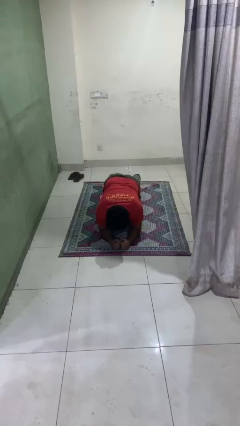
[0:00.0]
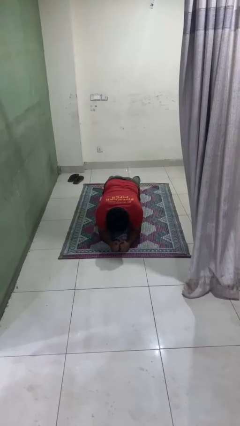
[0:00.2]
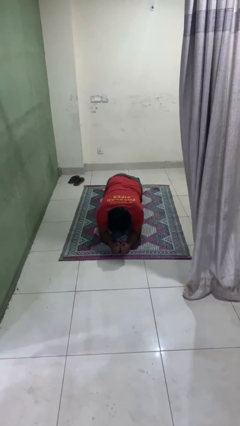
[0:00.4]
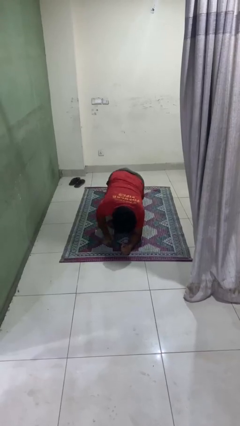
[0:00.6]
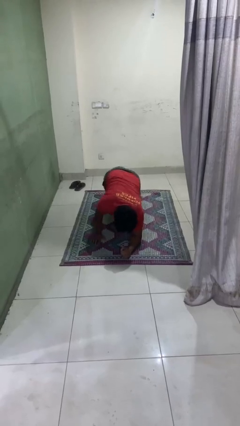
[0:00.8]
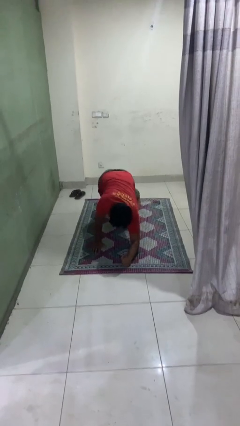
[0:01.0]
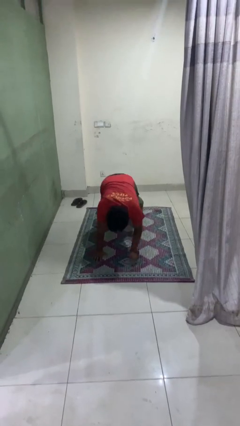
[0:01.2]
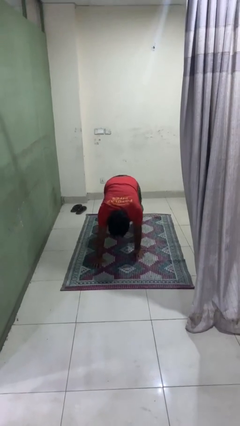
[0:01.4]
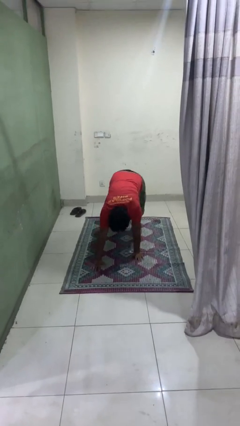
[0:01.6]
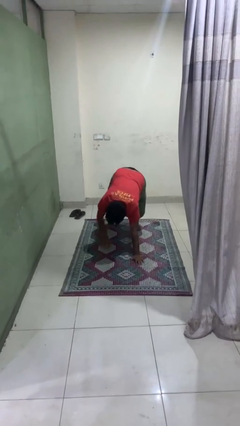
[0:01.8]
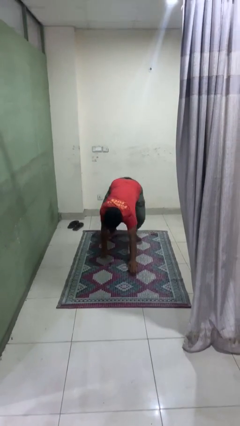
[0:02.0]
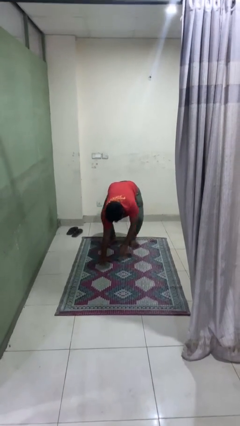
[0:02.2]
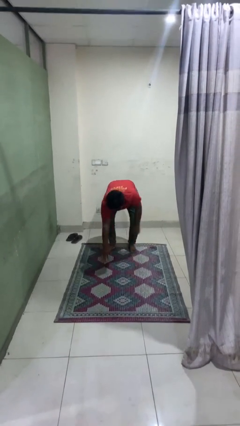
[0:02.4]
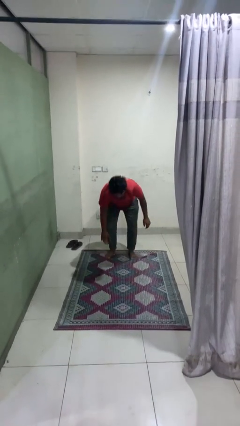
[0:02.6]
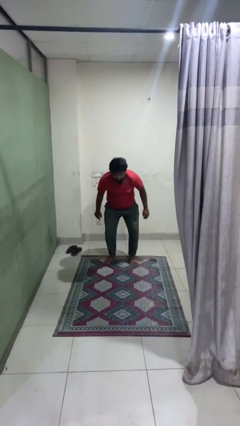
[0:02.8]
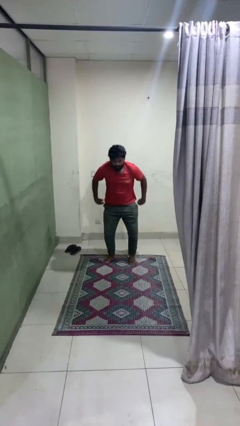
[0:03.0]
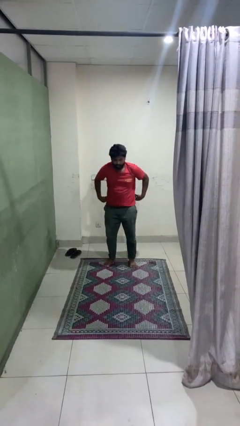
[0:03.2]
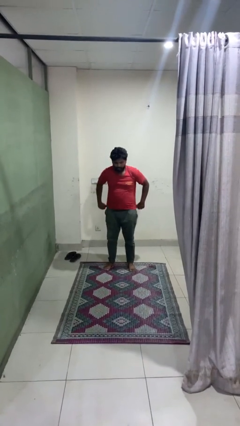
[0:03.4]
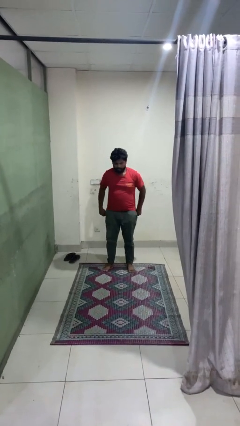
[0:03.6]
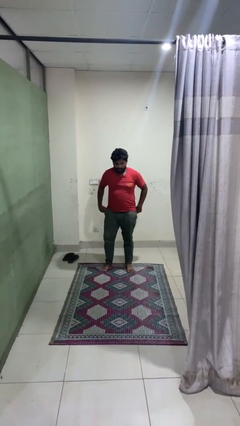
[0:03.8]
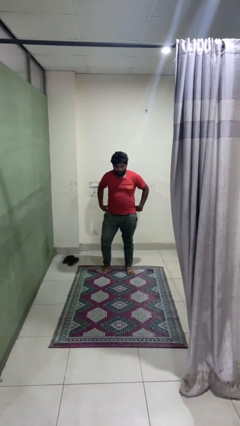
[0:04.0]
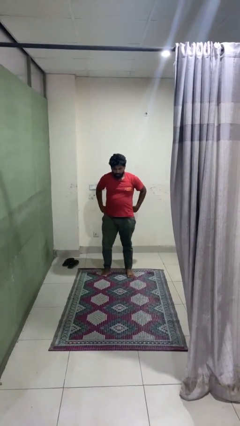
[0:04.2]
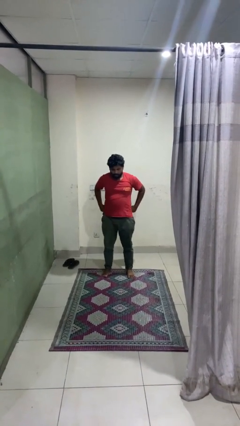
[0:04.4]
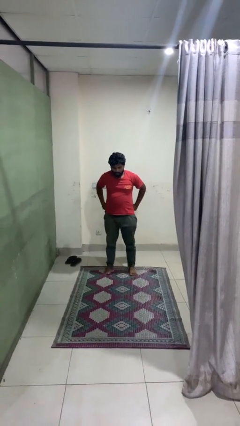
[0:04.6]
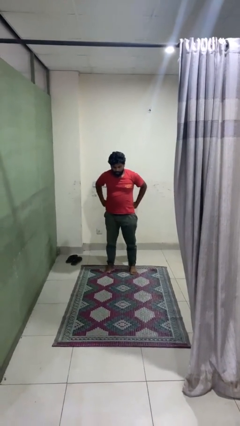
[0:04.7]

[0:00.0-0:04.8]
person stands up from floor

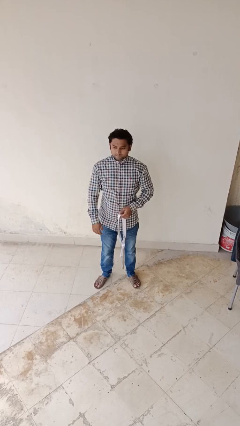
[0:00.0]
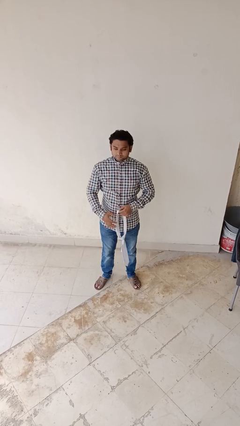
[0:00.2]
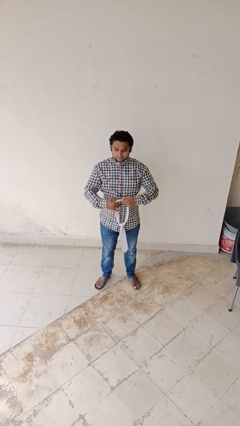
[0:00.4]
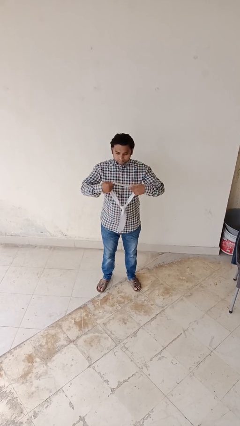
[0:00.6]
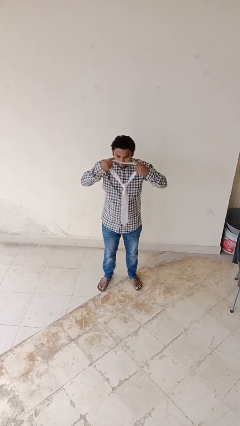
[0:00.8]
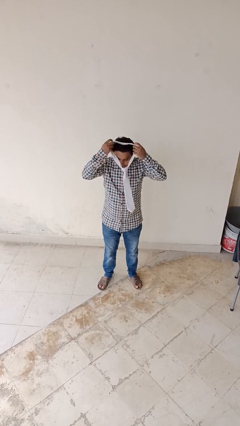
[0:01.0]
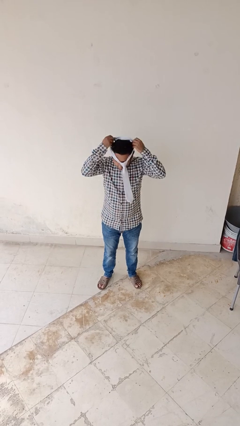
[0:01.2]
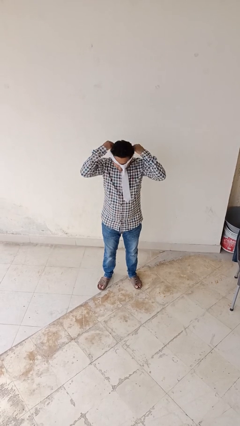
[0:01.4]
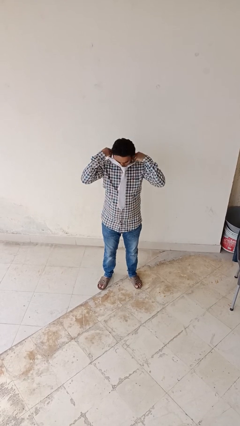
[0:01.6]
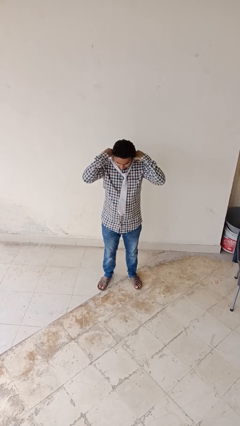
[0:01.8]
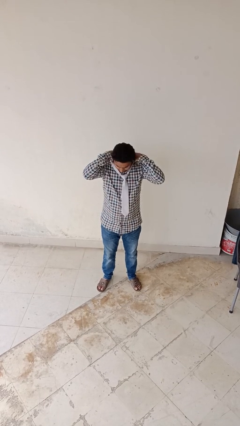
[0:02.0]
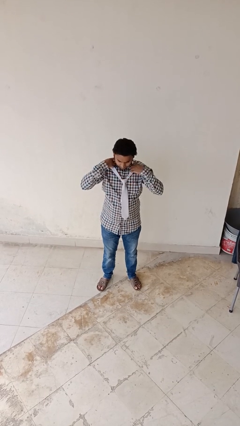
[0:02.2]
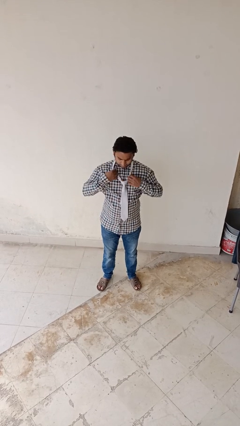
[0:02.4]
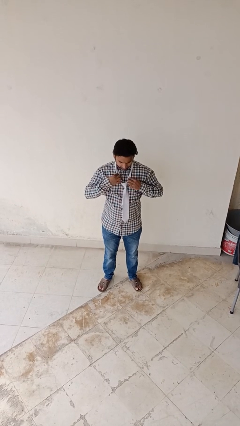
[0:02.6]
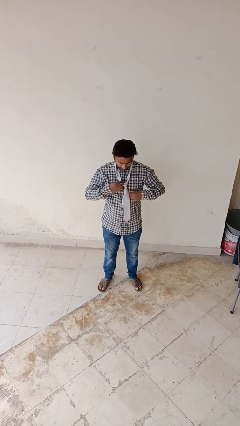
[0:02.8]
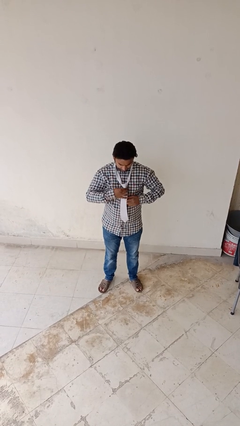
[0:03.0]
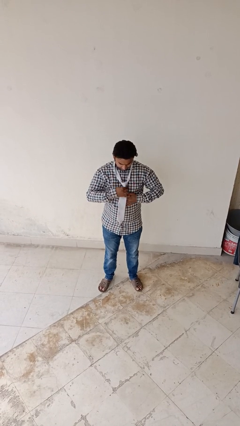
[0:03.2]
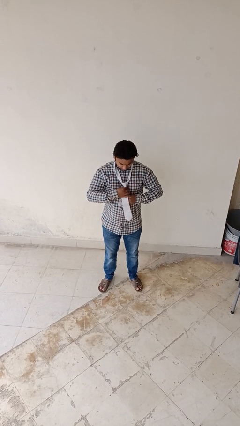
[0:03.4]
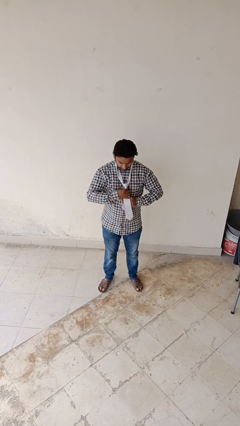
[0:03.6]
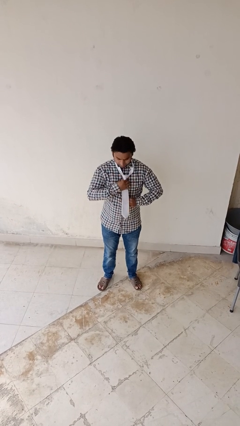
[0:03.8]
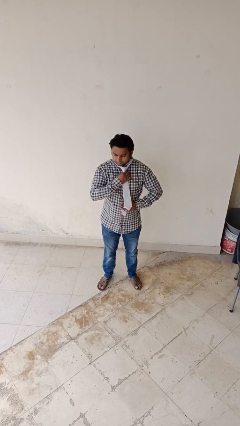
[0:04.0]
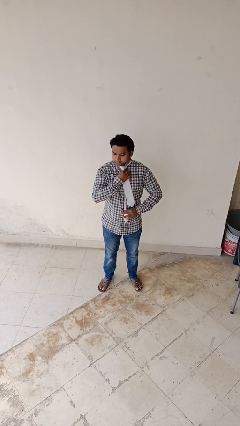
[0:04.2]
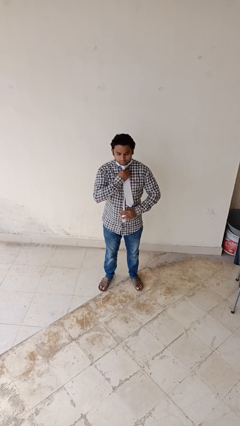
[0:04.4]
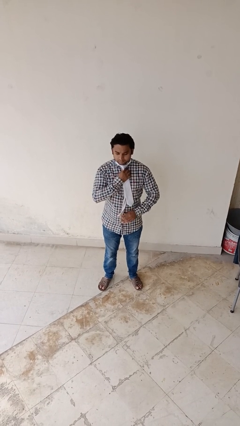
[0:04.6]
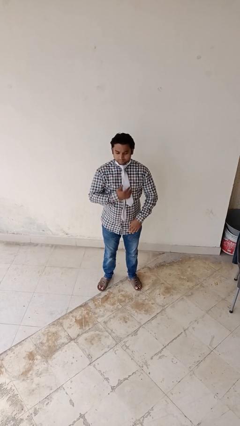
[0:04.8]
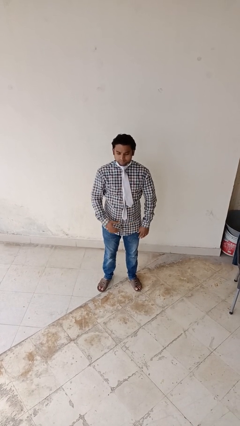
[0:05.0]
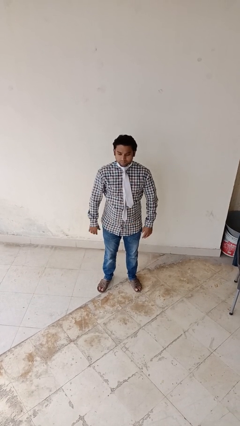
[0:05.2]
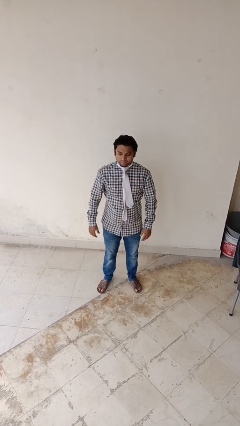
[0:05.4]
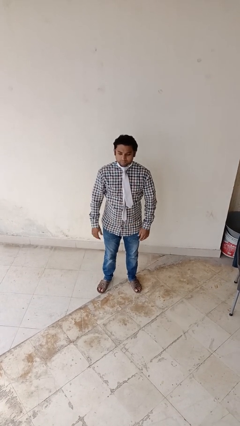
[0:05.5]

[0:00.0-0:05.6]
person puts on necktie

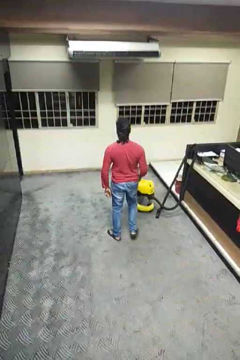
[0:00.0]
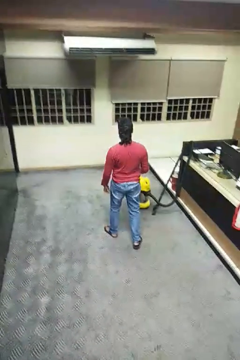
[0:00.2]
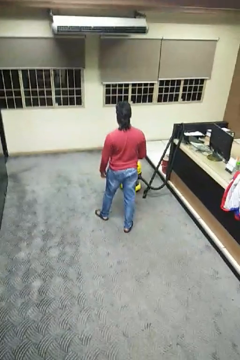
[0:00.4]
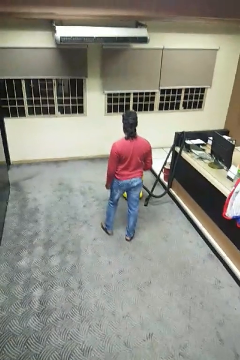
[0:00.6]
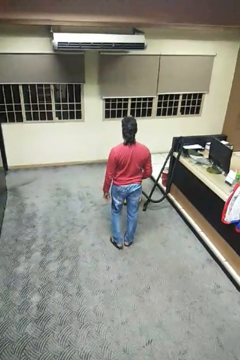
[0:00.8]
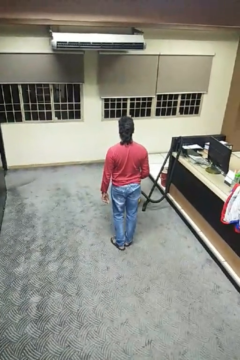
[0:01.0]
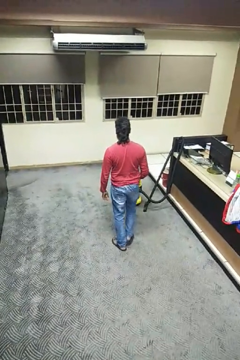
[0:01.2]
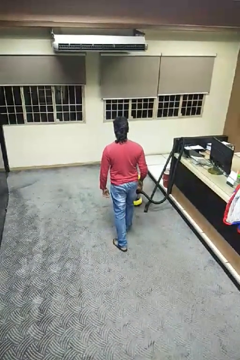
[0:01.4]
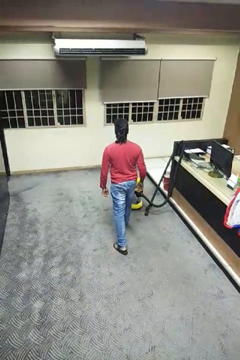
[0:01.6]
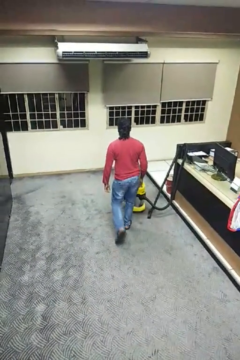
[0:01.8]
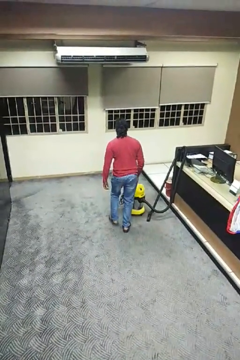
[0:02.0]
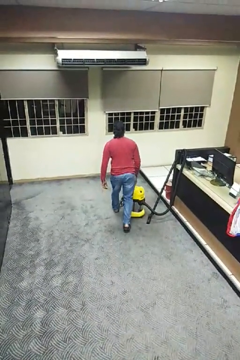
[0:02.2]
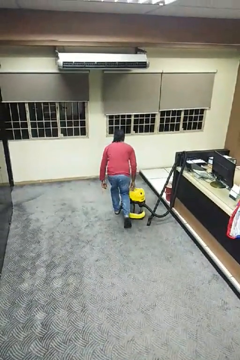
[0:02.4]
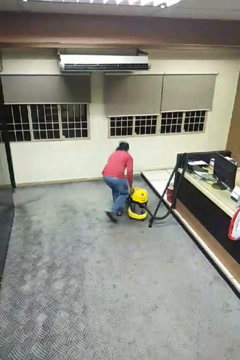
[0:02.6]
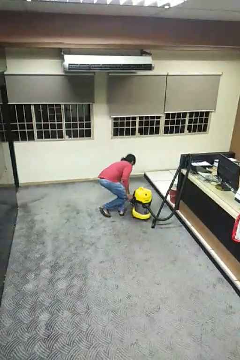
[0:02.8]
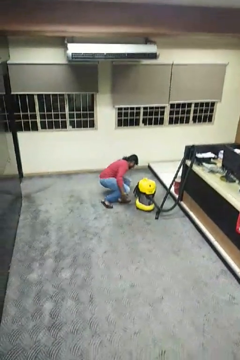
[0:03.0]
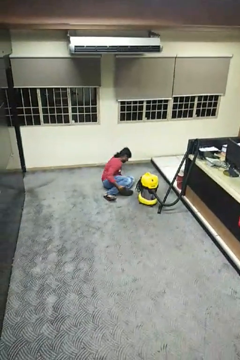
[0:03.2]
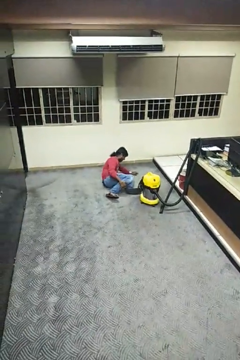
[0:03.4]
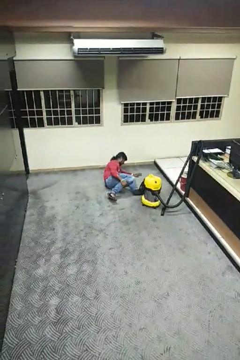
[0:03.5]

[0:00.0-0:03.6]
person trips on object on floor

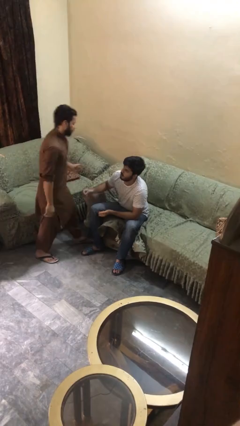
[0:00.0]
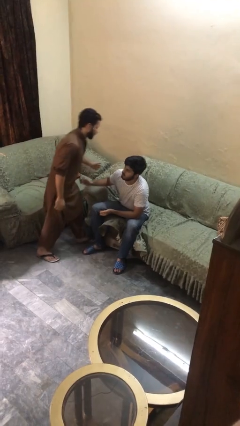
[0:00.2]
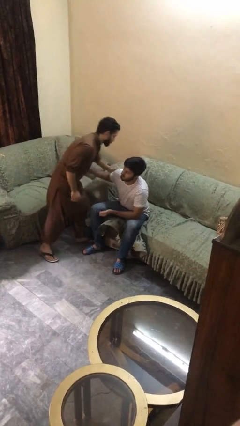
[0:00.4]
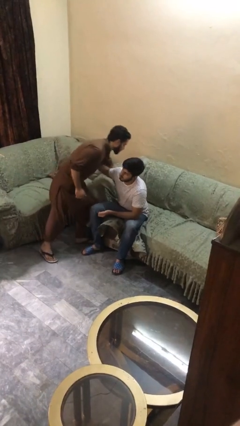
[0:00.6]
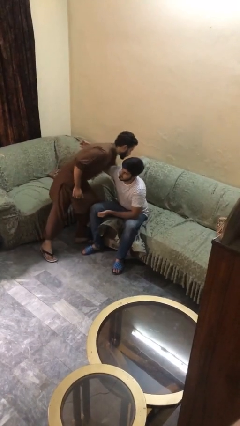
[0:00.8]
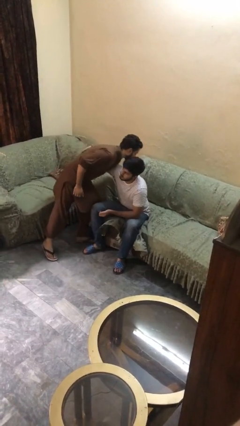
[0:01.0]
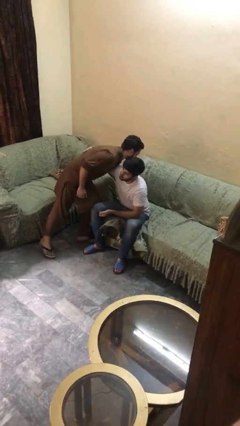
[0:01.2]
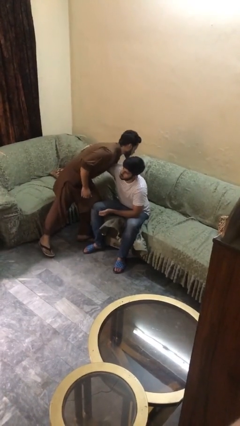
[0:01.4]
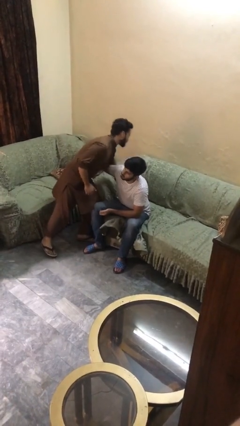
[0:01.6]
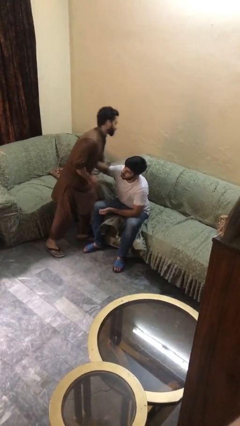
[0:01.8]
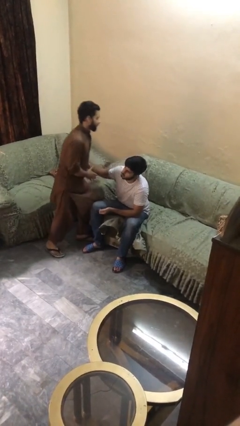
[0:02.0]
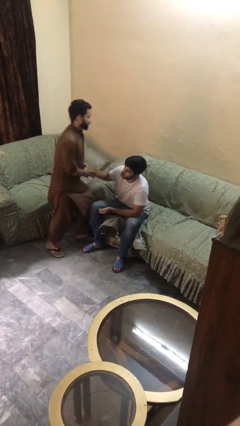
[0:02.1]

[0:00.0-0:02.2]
person embraces person

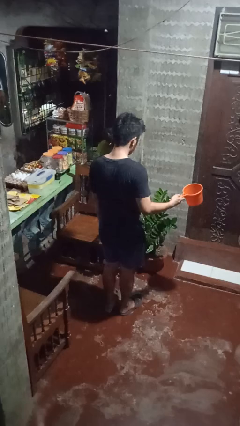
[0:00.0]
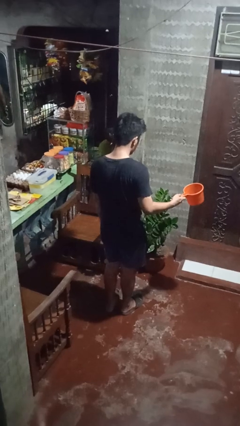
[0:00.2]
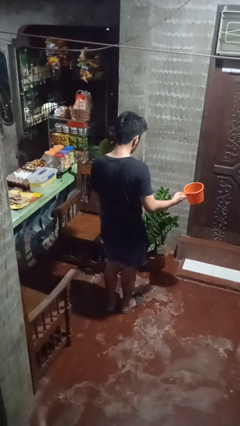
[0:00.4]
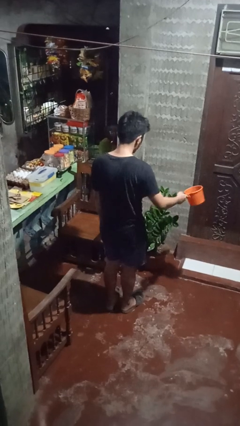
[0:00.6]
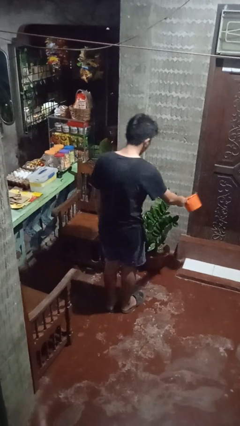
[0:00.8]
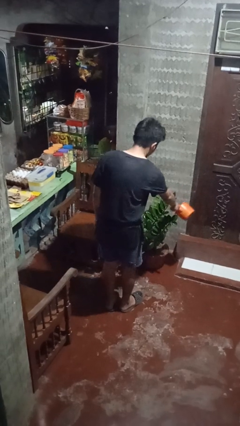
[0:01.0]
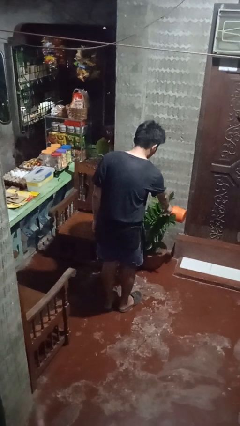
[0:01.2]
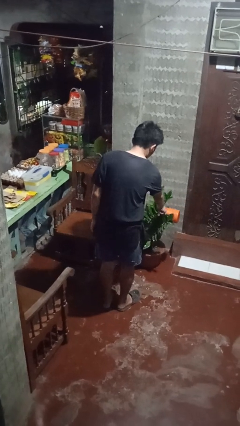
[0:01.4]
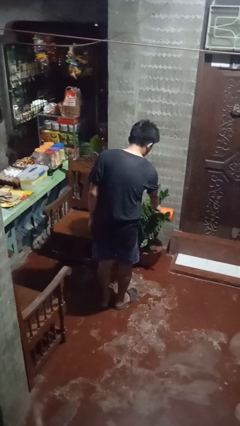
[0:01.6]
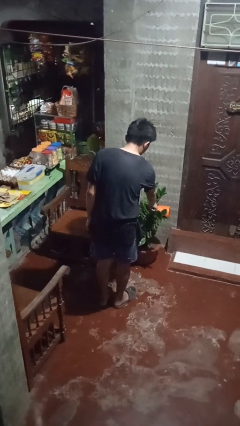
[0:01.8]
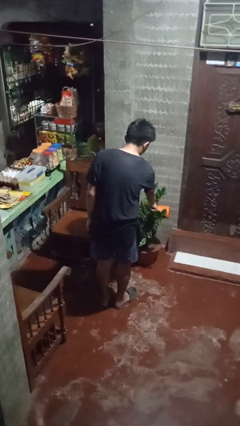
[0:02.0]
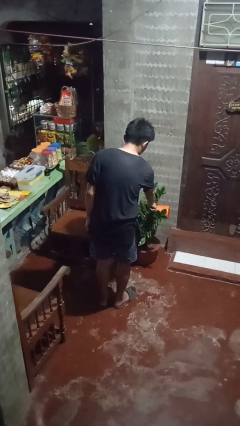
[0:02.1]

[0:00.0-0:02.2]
person waters houseplant
